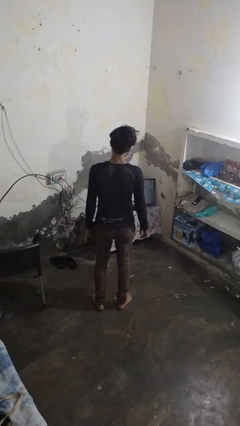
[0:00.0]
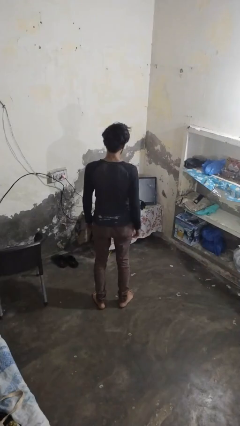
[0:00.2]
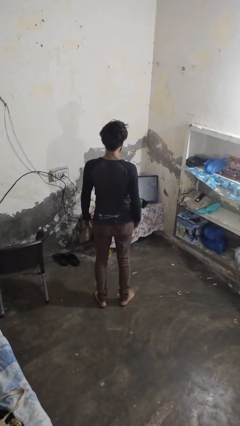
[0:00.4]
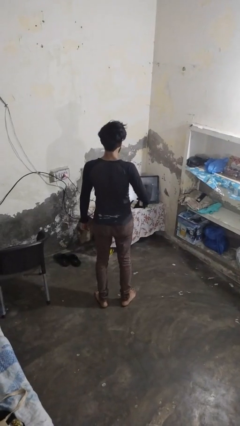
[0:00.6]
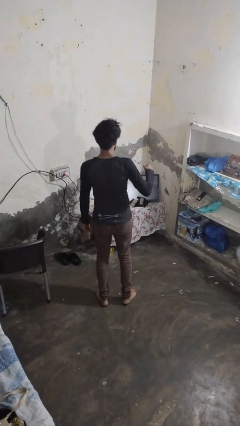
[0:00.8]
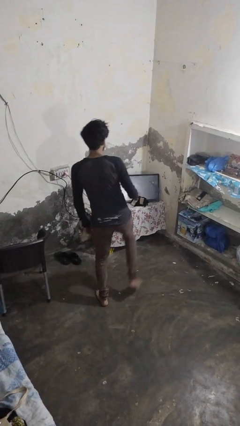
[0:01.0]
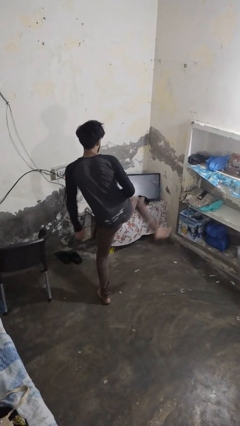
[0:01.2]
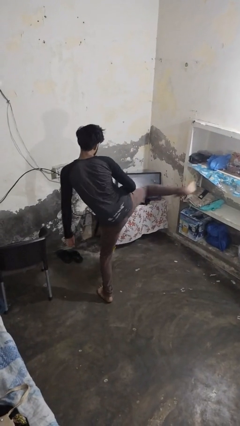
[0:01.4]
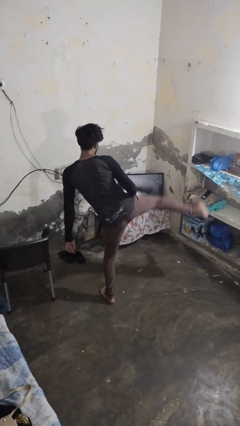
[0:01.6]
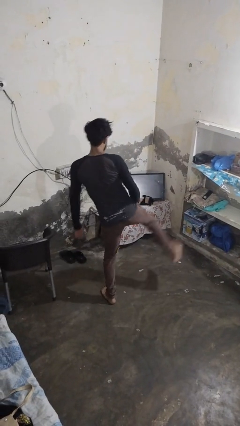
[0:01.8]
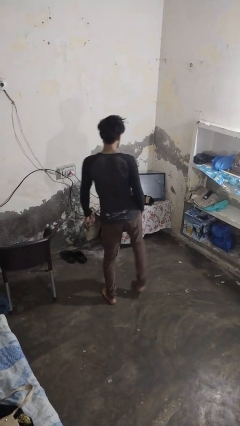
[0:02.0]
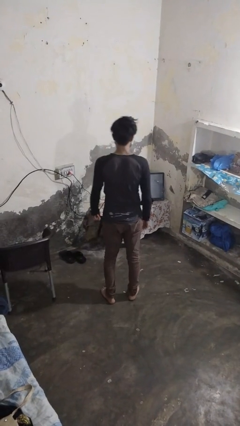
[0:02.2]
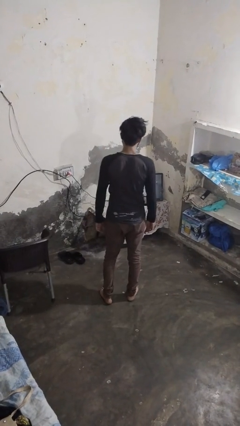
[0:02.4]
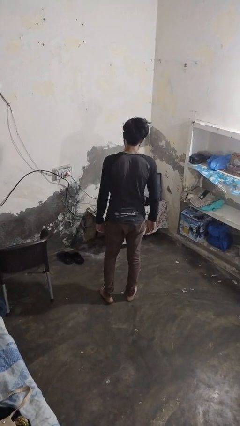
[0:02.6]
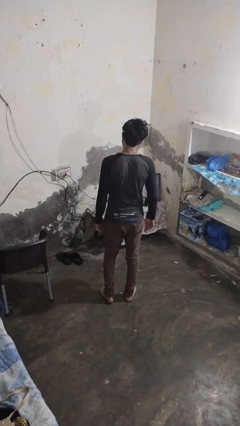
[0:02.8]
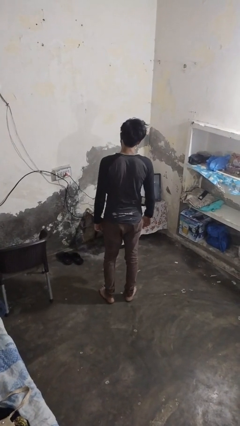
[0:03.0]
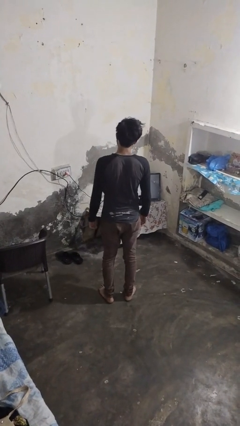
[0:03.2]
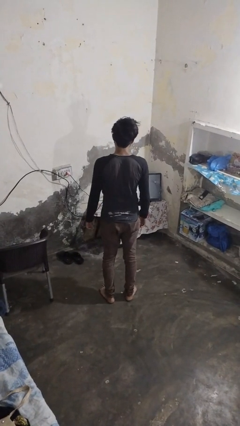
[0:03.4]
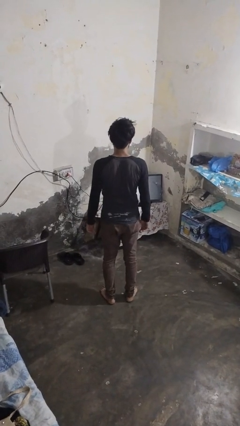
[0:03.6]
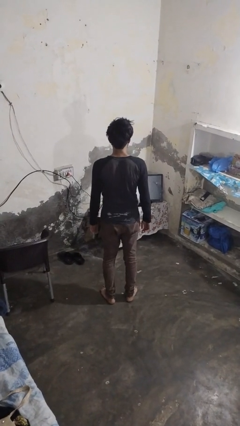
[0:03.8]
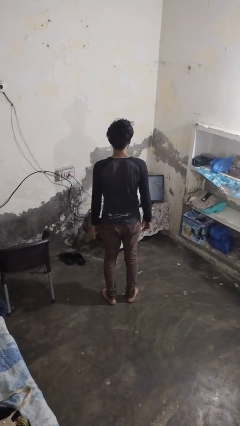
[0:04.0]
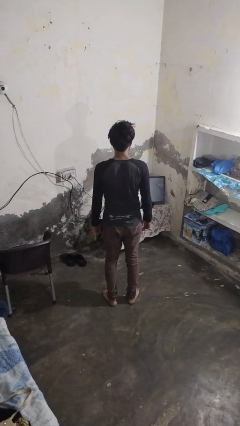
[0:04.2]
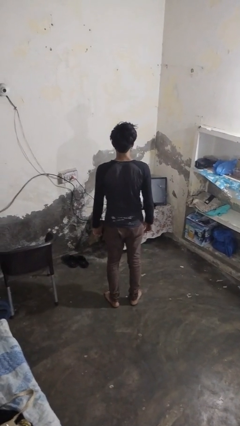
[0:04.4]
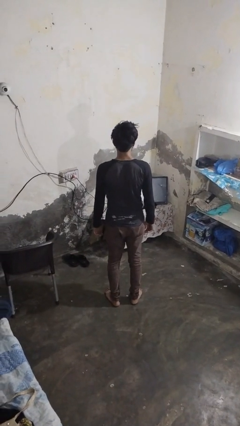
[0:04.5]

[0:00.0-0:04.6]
person karate kicks

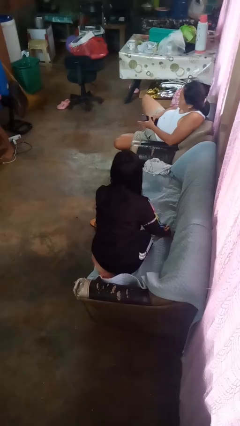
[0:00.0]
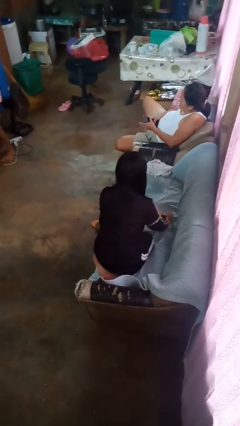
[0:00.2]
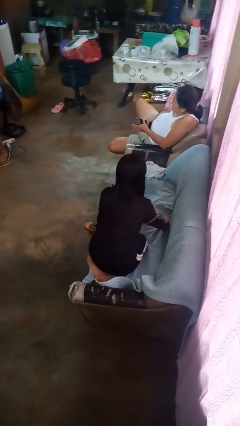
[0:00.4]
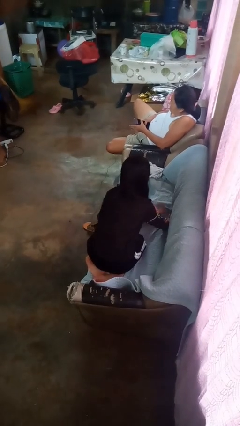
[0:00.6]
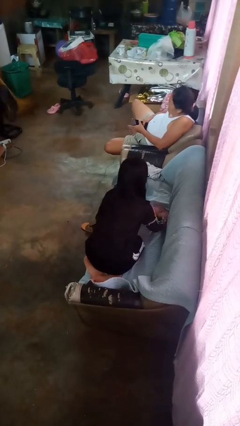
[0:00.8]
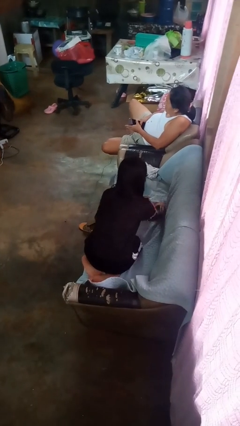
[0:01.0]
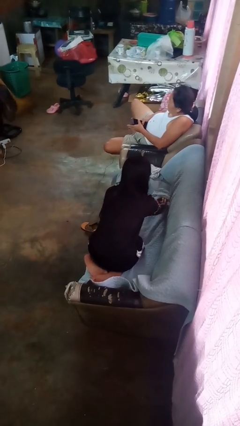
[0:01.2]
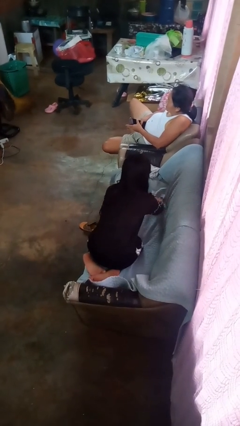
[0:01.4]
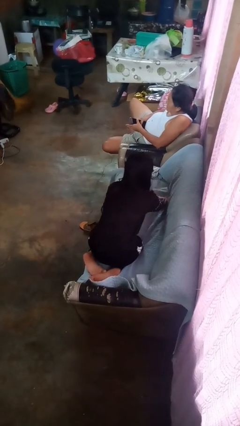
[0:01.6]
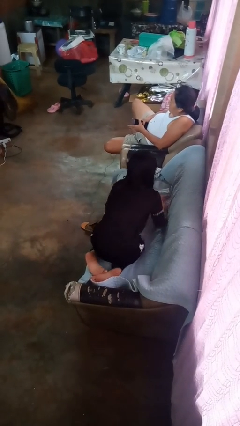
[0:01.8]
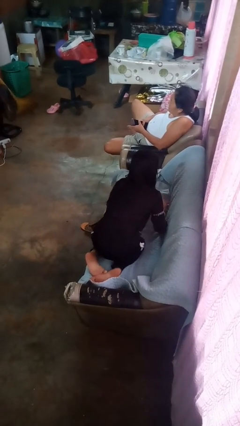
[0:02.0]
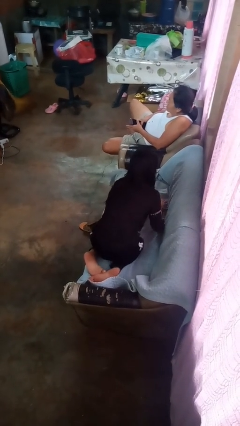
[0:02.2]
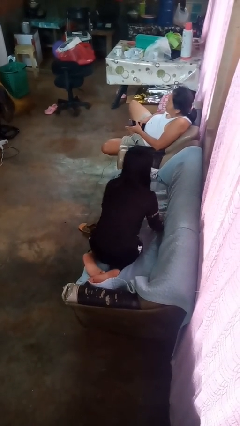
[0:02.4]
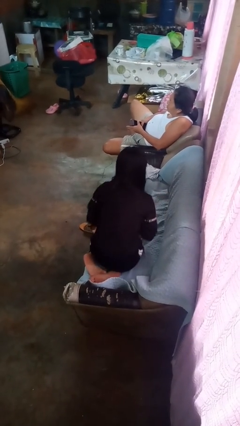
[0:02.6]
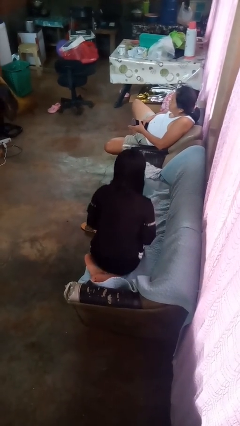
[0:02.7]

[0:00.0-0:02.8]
person searches in couch

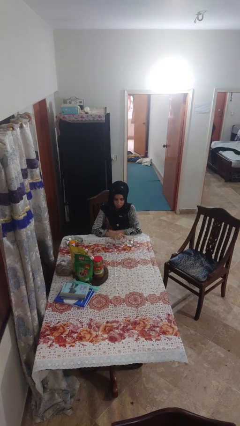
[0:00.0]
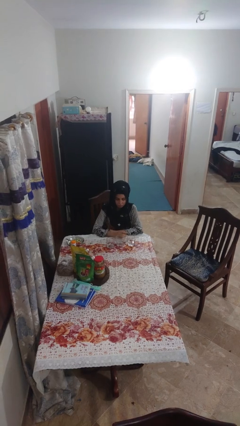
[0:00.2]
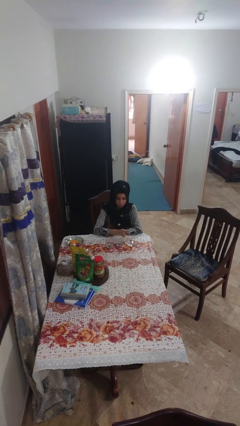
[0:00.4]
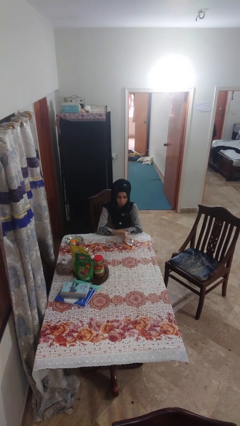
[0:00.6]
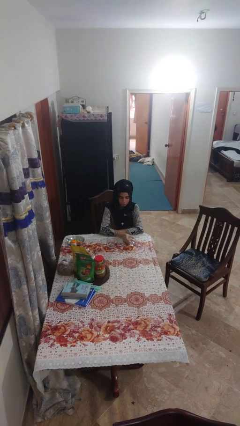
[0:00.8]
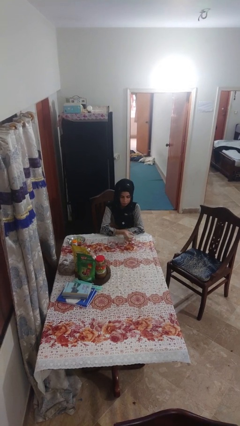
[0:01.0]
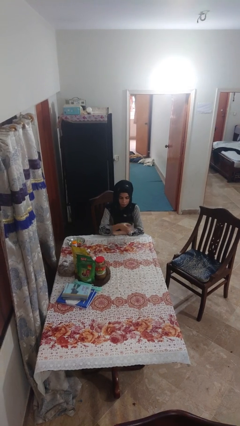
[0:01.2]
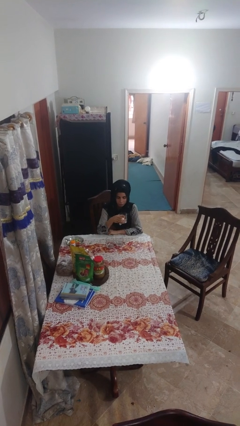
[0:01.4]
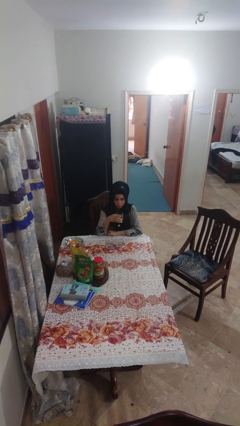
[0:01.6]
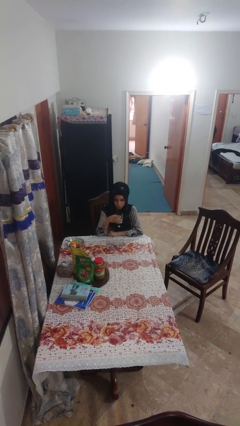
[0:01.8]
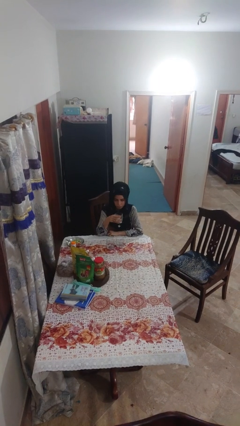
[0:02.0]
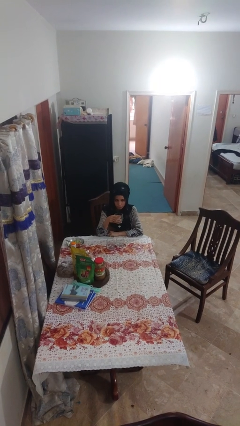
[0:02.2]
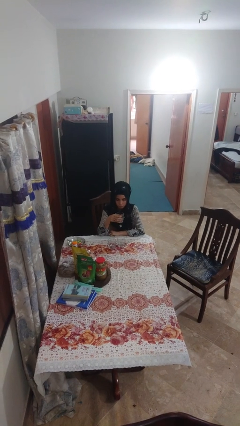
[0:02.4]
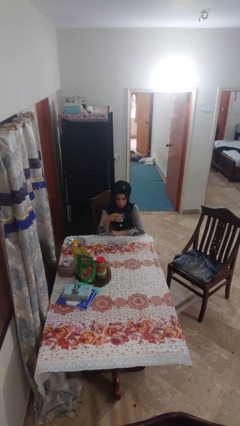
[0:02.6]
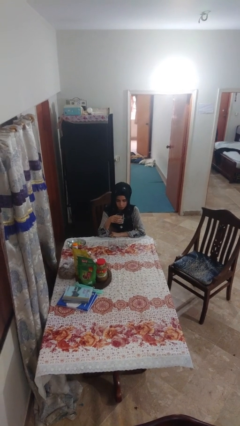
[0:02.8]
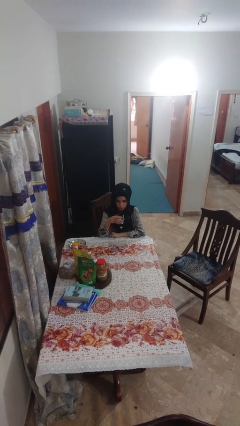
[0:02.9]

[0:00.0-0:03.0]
person picks up object from table

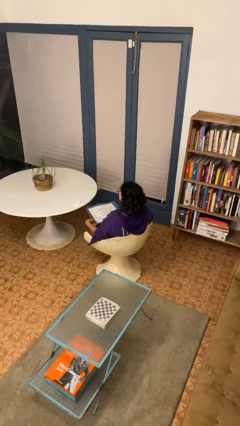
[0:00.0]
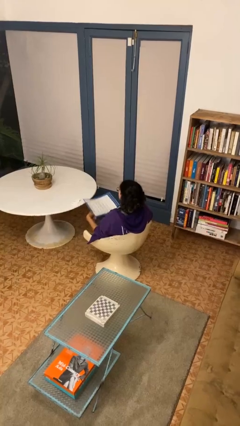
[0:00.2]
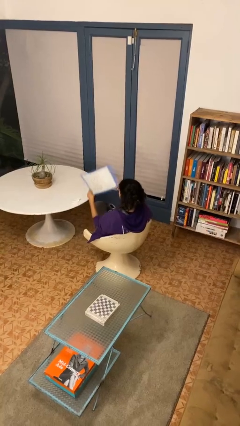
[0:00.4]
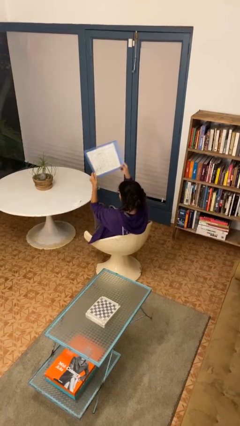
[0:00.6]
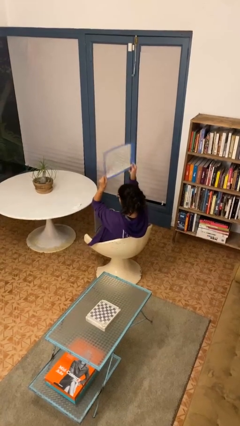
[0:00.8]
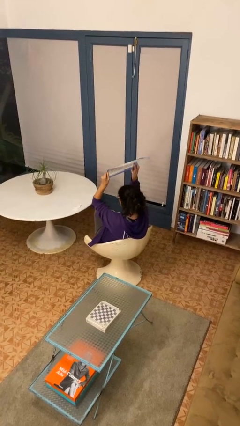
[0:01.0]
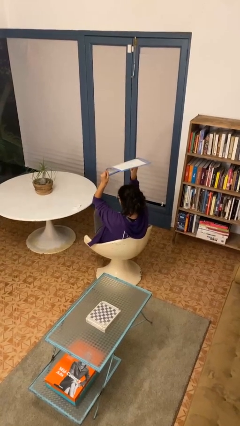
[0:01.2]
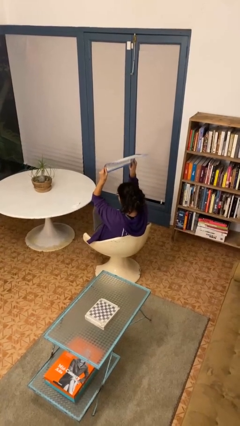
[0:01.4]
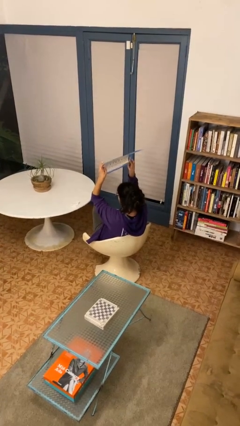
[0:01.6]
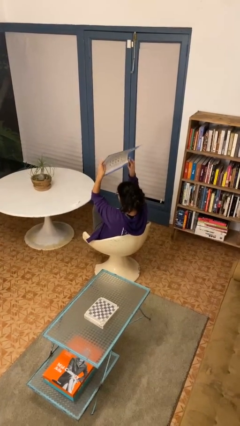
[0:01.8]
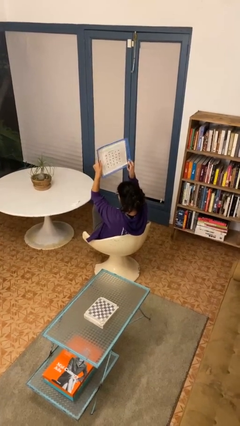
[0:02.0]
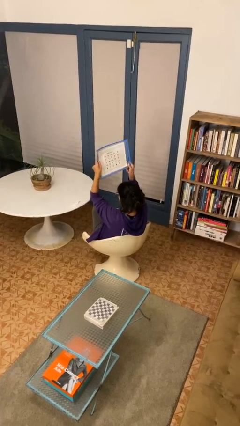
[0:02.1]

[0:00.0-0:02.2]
person holds object above head

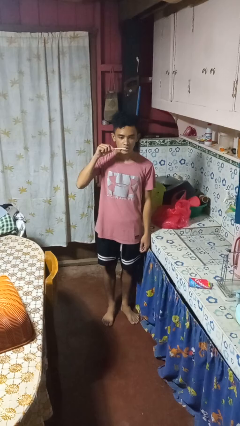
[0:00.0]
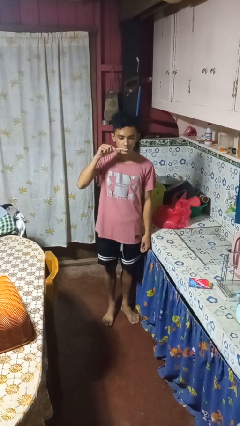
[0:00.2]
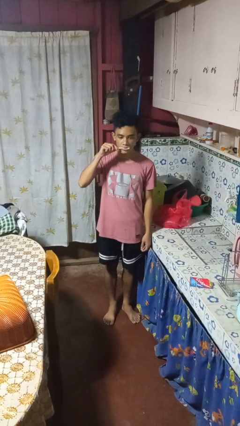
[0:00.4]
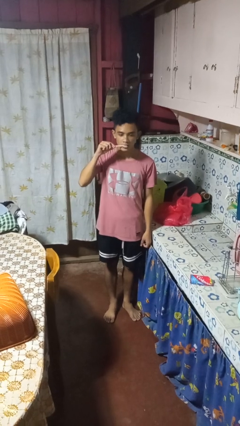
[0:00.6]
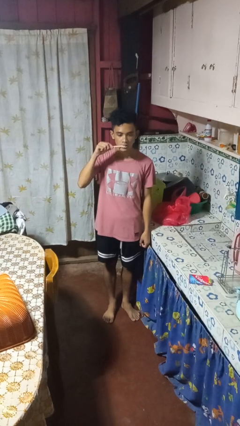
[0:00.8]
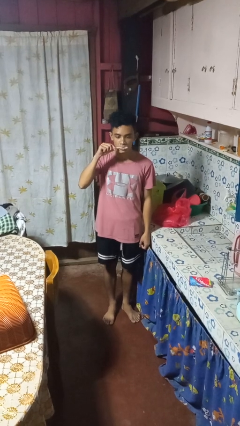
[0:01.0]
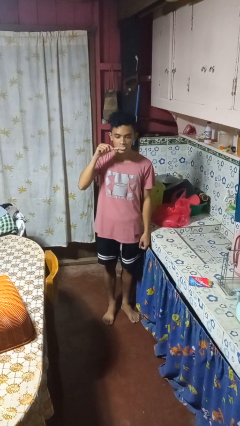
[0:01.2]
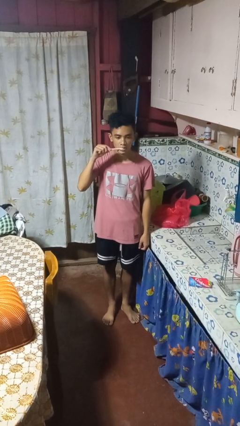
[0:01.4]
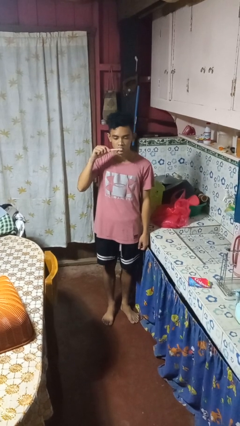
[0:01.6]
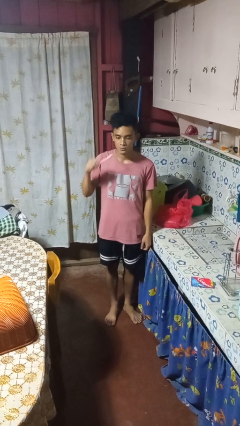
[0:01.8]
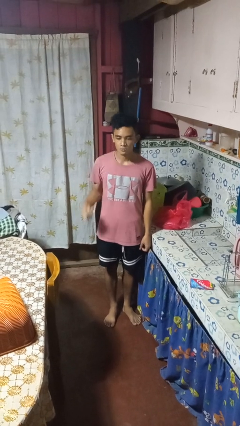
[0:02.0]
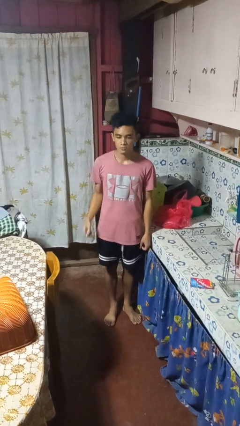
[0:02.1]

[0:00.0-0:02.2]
person brushes teeth

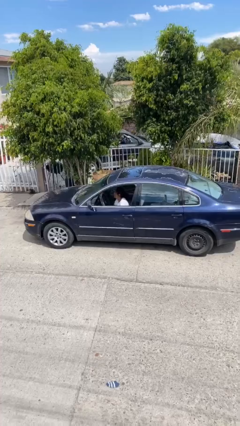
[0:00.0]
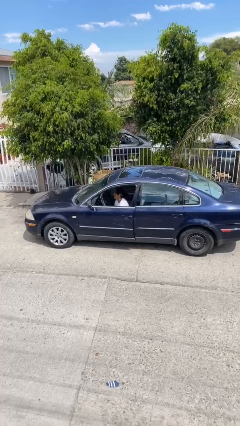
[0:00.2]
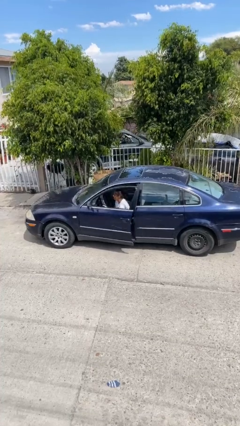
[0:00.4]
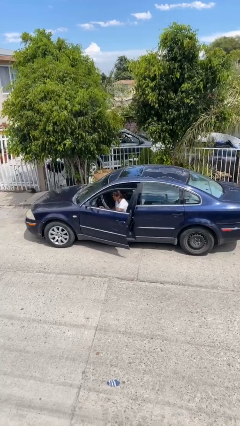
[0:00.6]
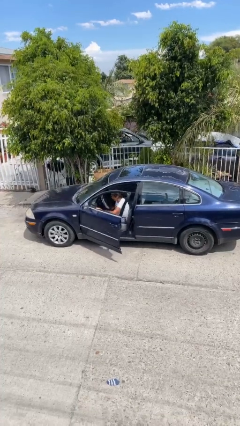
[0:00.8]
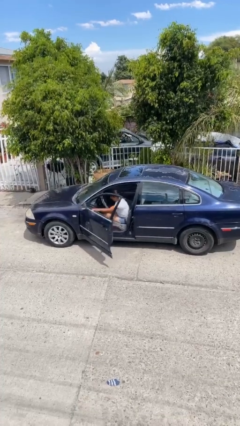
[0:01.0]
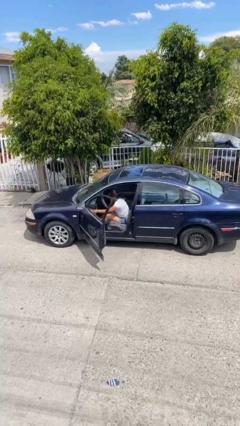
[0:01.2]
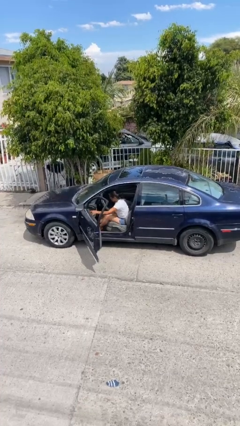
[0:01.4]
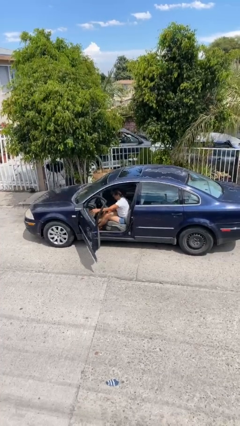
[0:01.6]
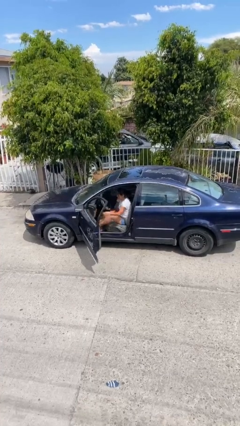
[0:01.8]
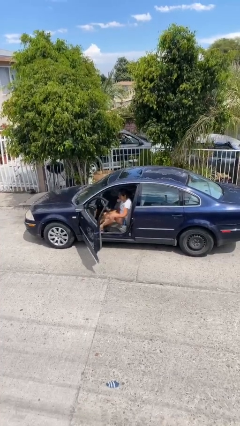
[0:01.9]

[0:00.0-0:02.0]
person opens car door

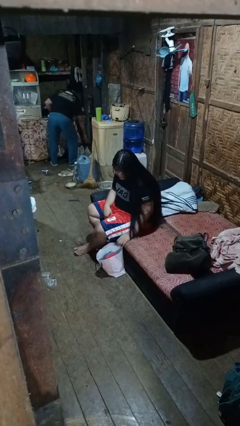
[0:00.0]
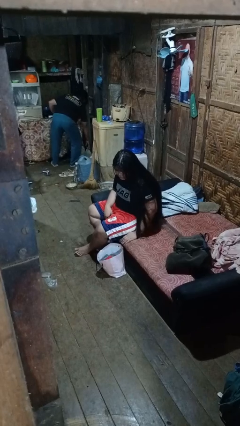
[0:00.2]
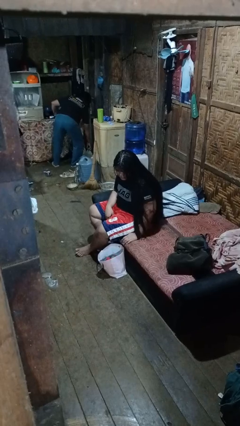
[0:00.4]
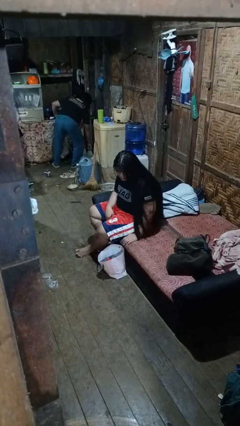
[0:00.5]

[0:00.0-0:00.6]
person puts object into bag
